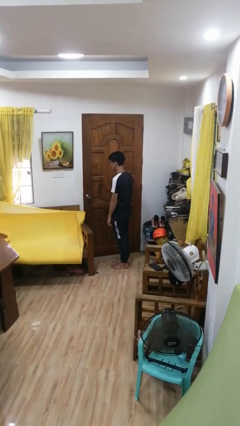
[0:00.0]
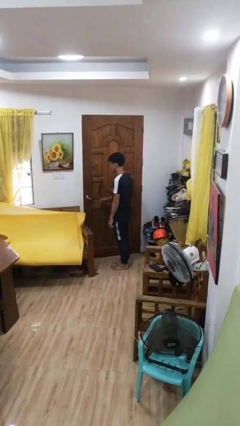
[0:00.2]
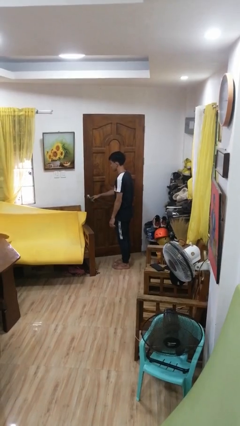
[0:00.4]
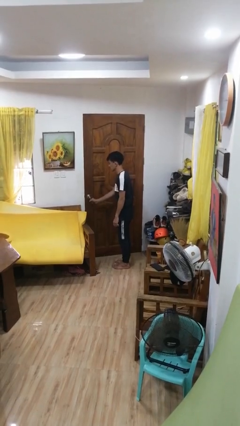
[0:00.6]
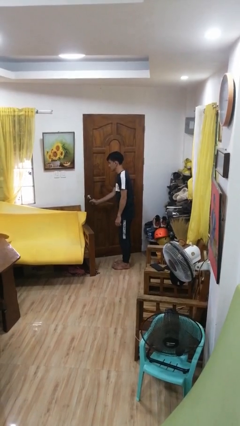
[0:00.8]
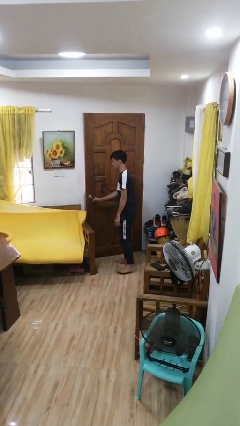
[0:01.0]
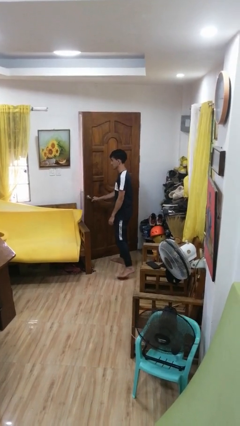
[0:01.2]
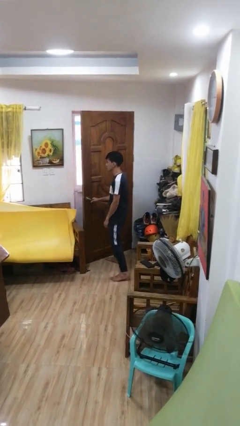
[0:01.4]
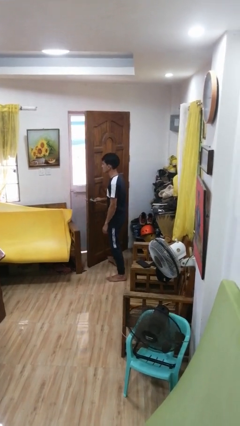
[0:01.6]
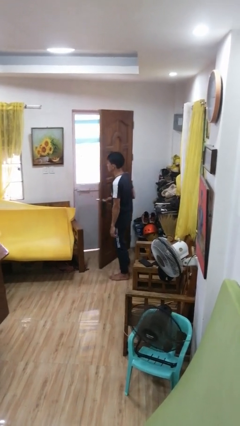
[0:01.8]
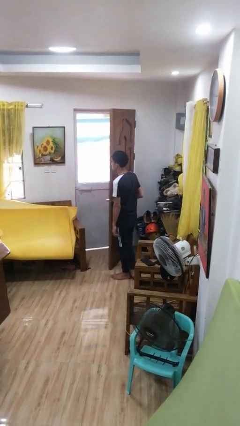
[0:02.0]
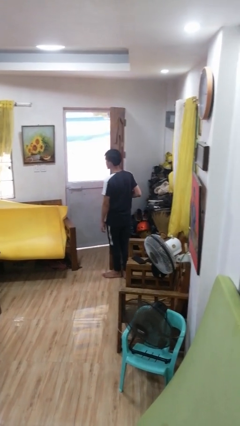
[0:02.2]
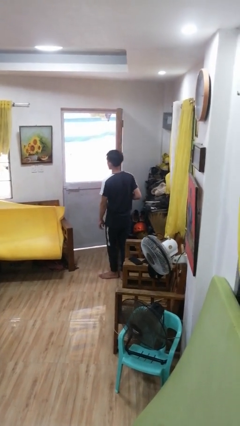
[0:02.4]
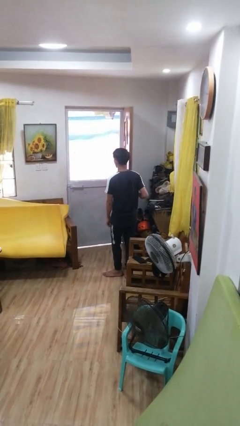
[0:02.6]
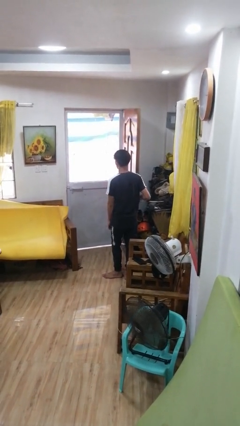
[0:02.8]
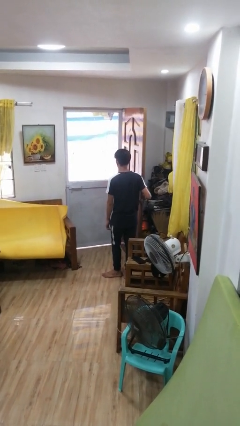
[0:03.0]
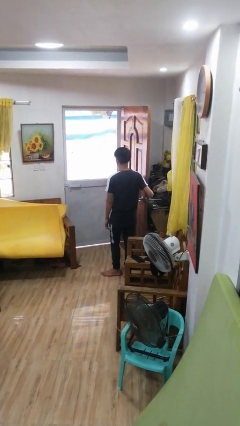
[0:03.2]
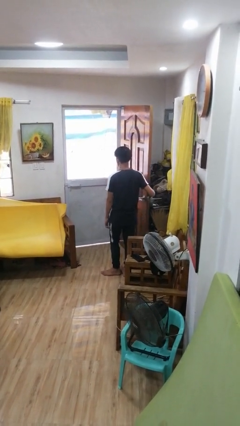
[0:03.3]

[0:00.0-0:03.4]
person opens facility door

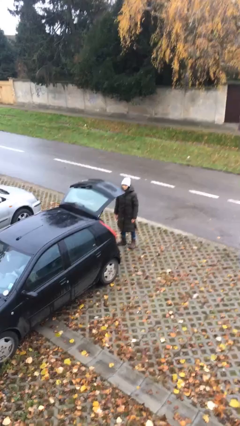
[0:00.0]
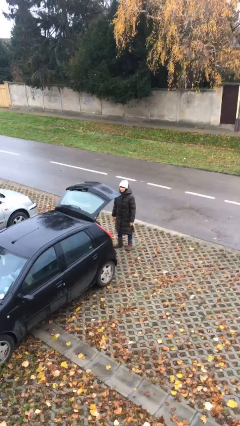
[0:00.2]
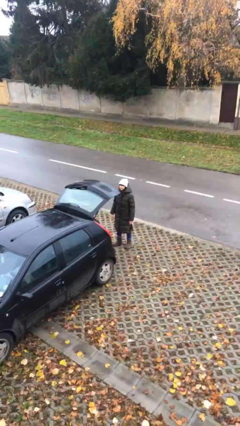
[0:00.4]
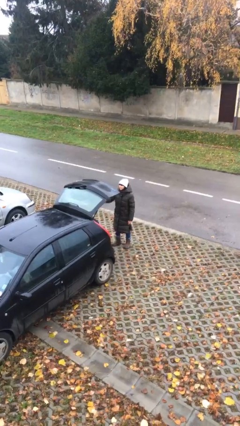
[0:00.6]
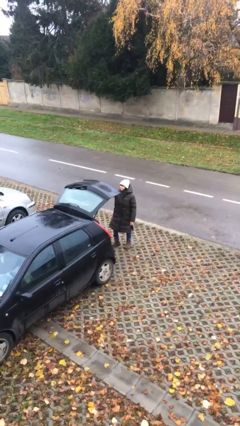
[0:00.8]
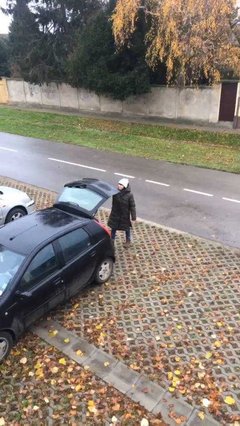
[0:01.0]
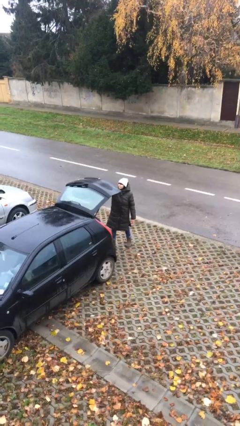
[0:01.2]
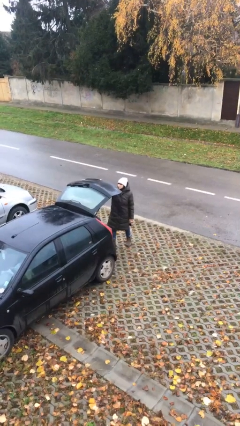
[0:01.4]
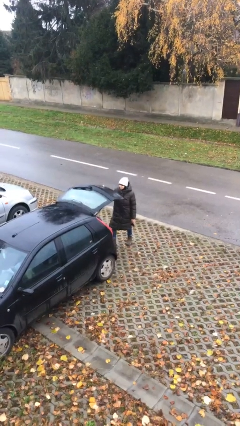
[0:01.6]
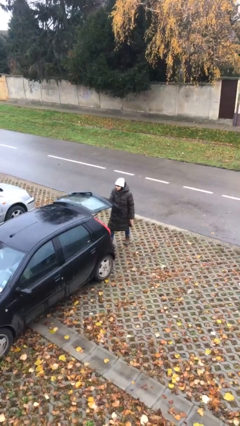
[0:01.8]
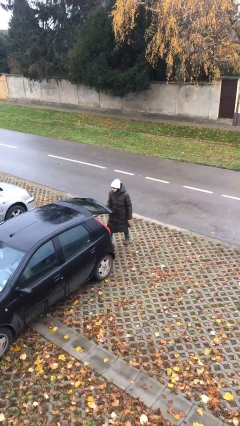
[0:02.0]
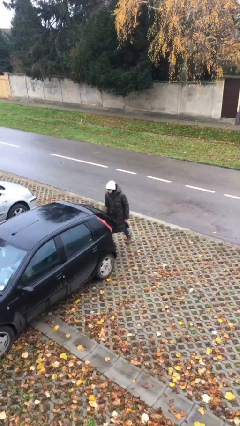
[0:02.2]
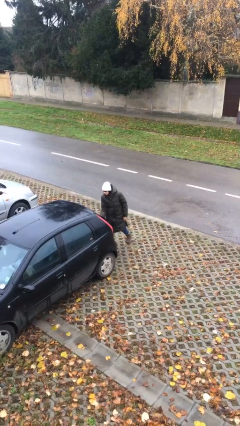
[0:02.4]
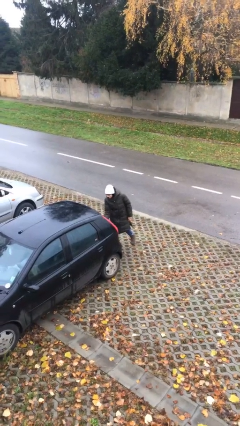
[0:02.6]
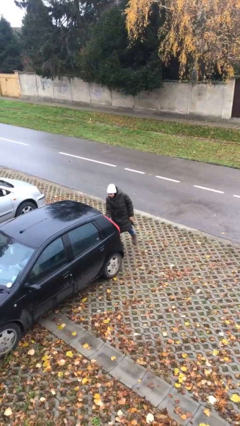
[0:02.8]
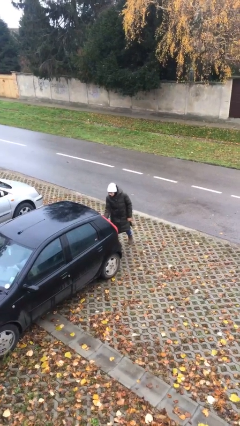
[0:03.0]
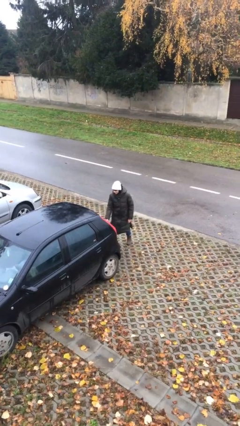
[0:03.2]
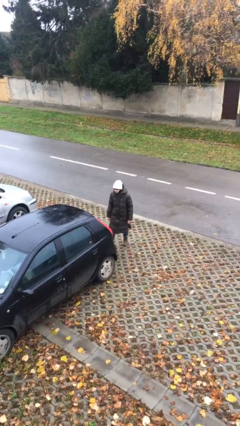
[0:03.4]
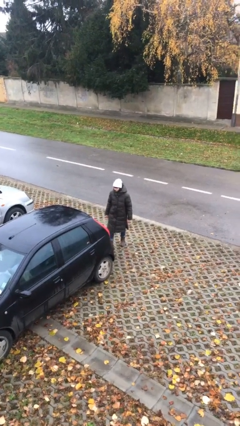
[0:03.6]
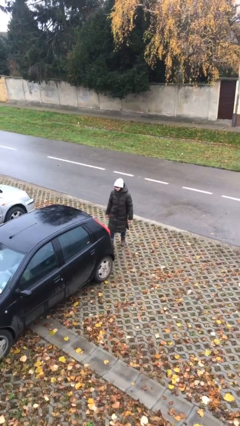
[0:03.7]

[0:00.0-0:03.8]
person closes car trunk

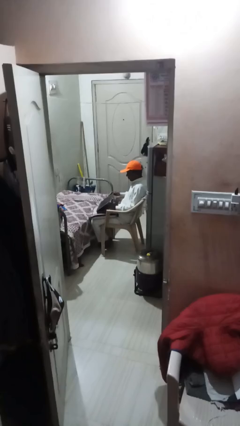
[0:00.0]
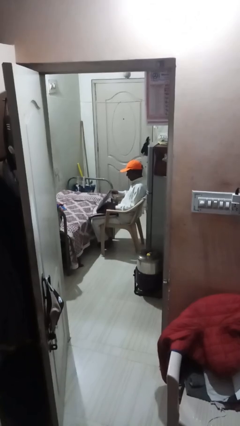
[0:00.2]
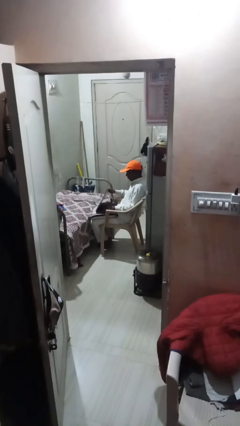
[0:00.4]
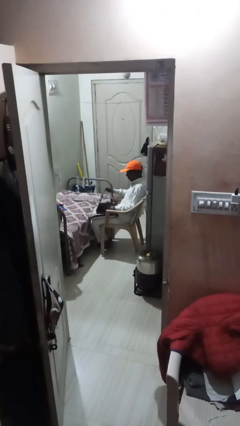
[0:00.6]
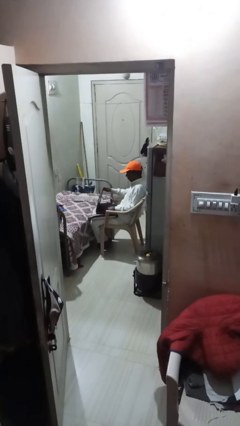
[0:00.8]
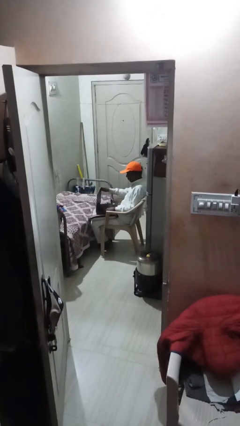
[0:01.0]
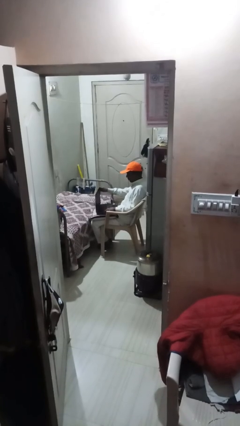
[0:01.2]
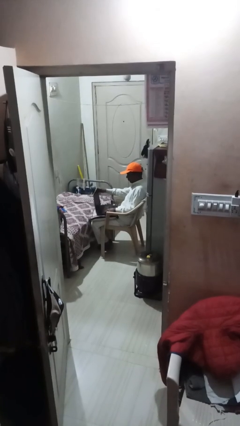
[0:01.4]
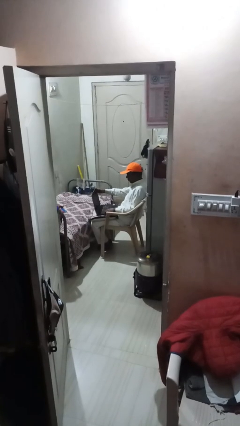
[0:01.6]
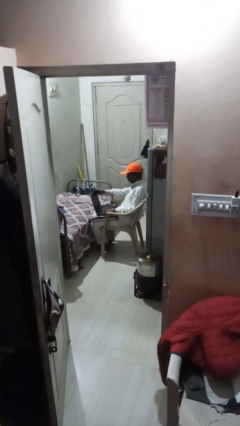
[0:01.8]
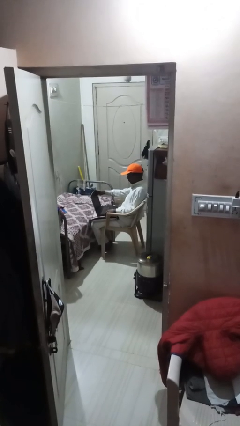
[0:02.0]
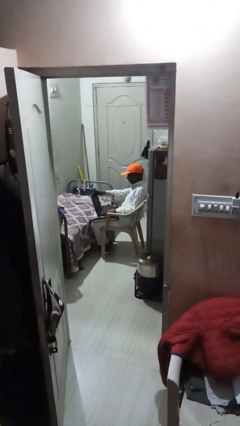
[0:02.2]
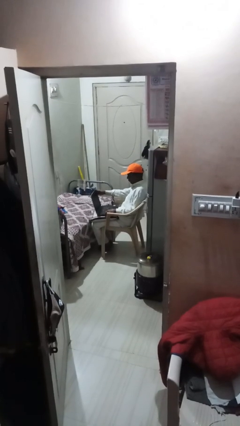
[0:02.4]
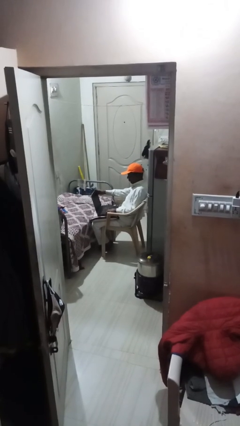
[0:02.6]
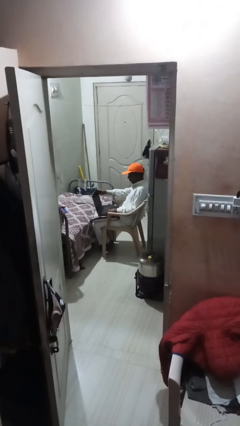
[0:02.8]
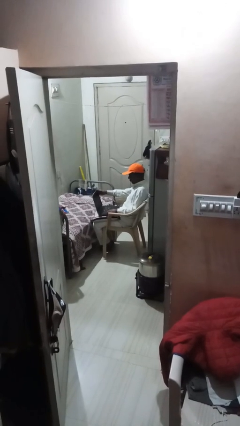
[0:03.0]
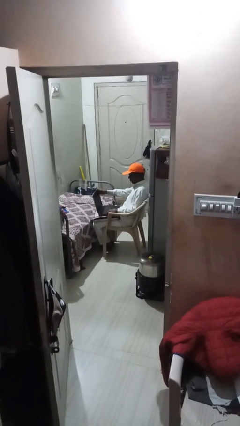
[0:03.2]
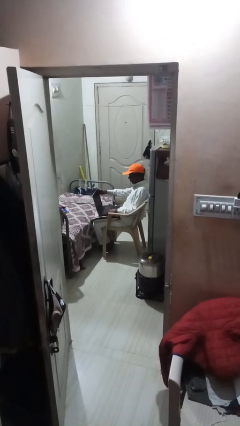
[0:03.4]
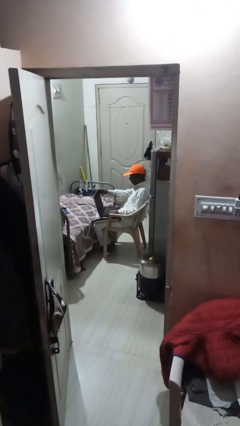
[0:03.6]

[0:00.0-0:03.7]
person interacts with laptop

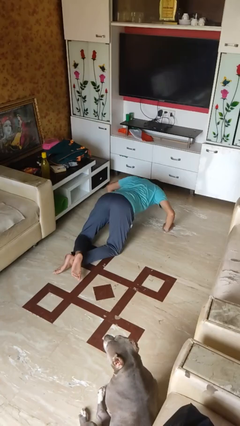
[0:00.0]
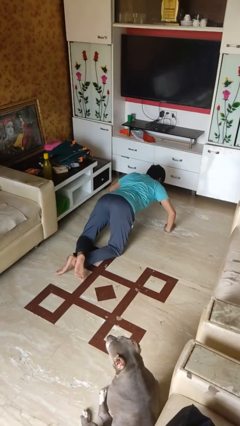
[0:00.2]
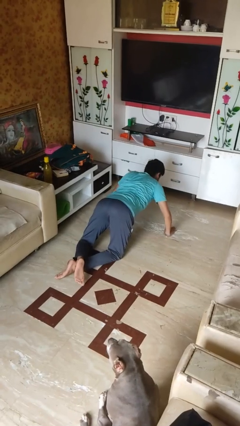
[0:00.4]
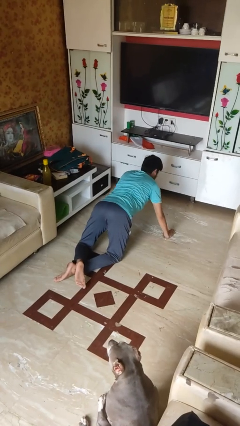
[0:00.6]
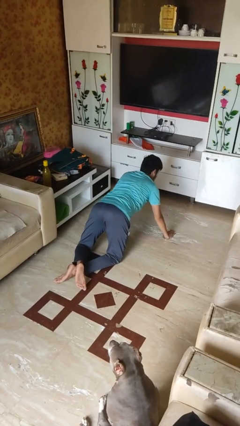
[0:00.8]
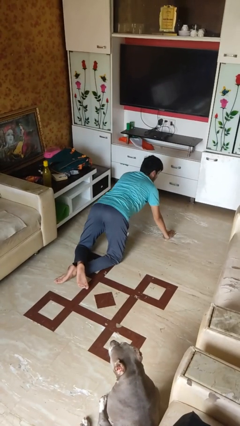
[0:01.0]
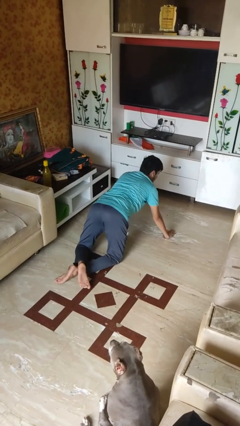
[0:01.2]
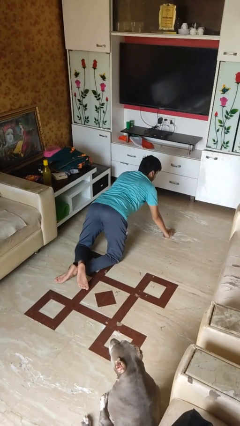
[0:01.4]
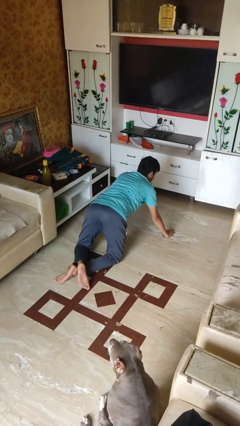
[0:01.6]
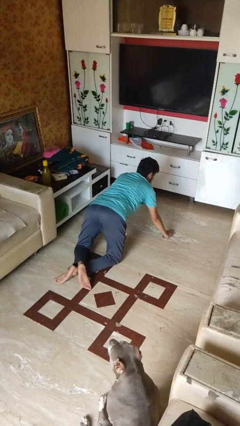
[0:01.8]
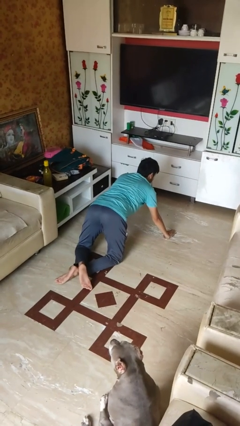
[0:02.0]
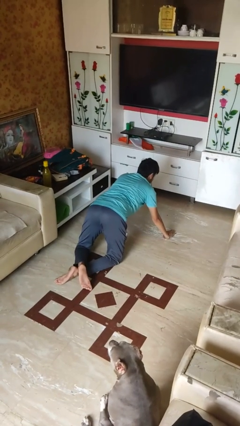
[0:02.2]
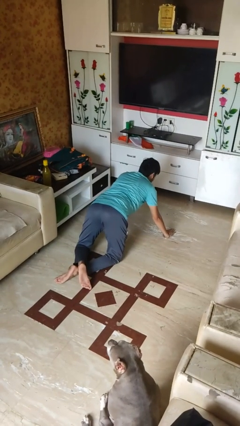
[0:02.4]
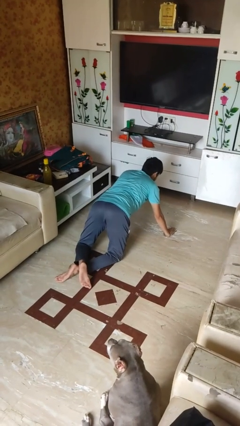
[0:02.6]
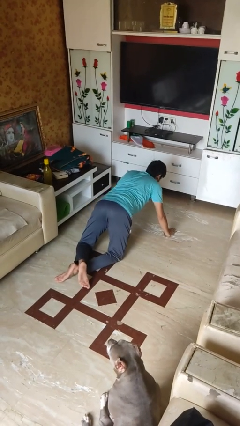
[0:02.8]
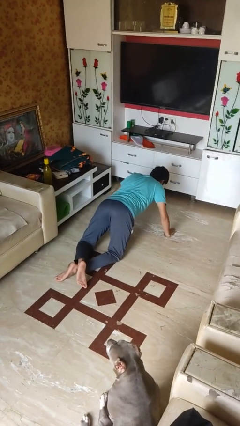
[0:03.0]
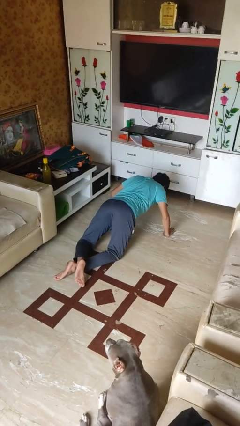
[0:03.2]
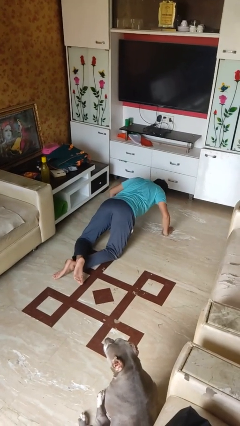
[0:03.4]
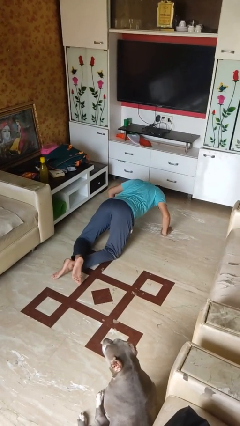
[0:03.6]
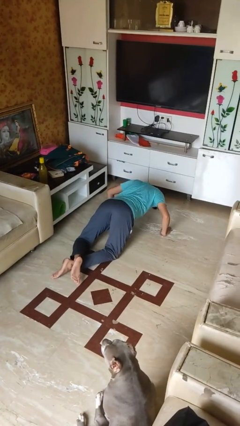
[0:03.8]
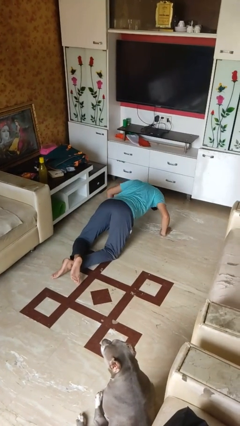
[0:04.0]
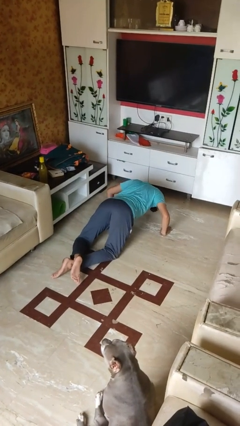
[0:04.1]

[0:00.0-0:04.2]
person exercises with pushup

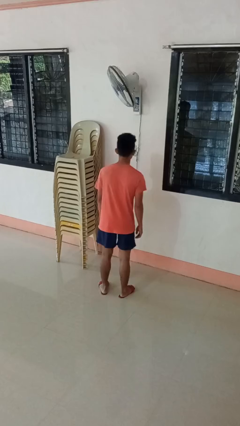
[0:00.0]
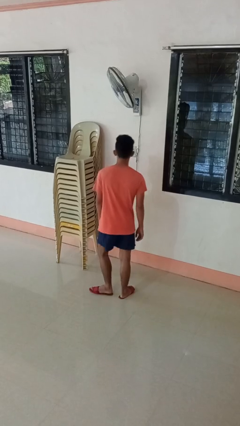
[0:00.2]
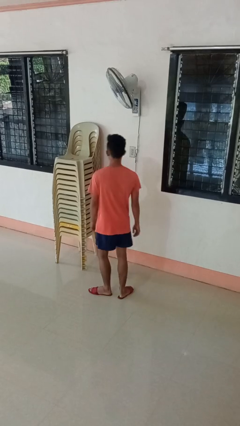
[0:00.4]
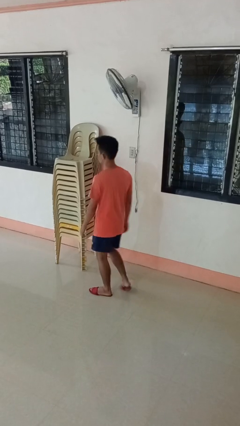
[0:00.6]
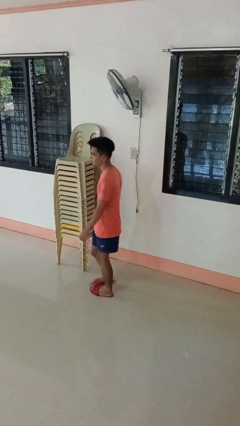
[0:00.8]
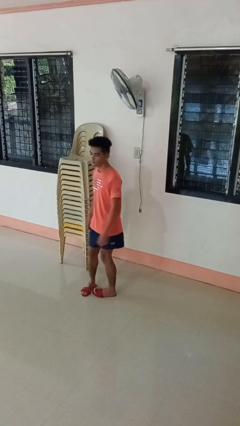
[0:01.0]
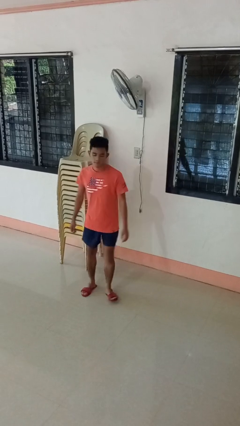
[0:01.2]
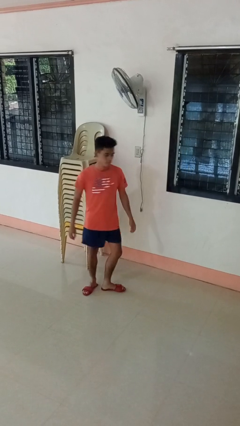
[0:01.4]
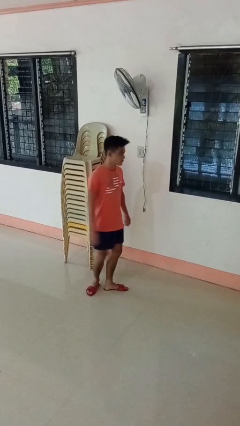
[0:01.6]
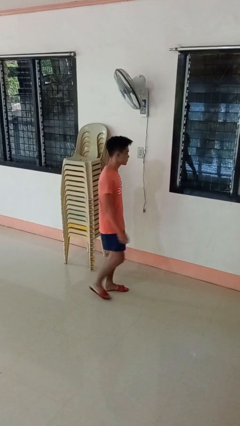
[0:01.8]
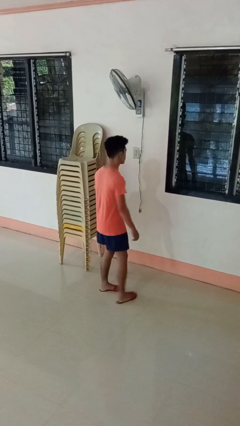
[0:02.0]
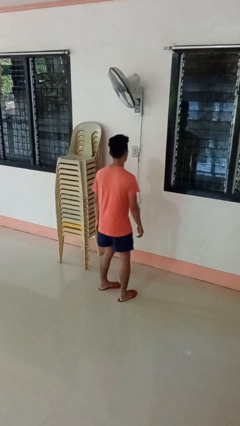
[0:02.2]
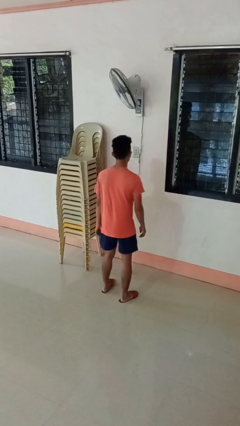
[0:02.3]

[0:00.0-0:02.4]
person twirls
